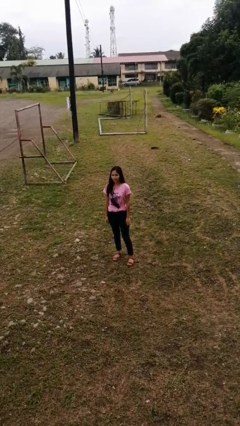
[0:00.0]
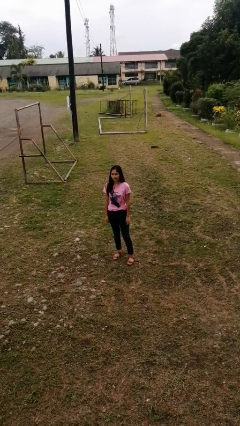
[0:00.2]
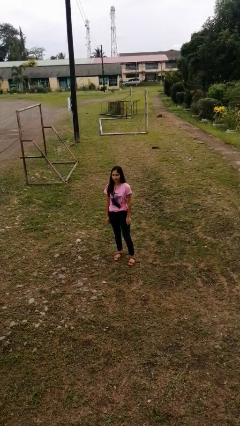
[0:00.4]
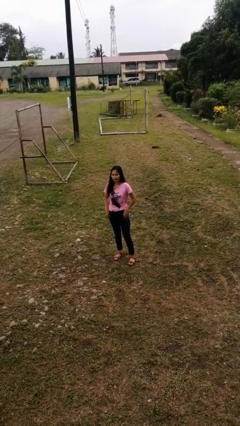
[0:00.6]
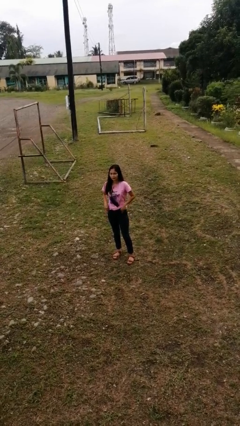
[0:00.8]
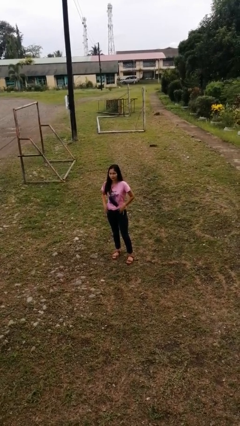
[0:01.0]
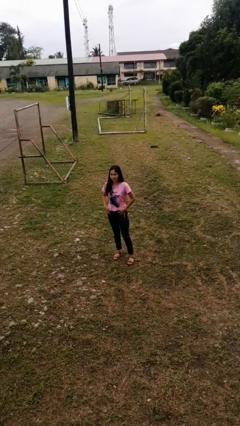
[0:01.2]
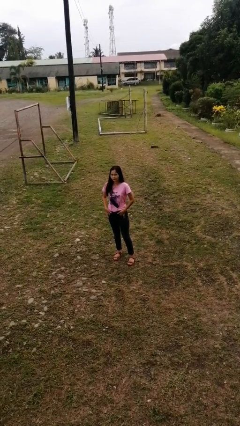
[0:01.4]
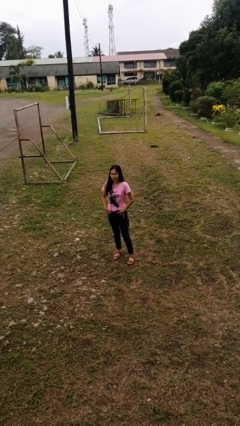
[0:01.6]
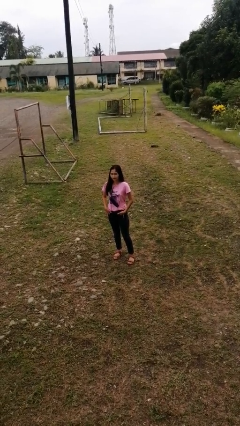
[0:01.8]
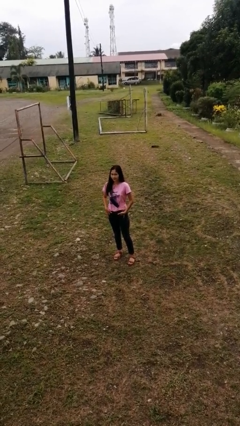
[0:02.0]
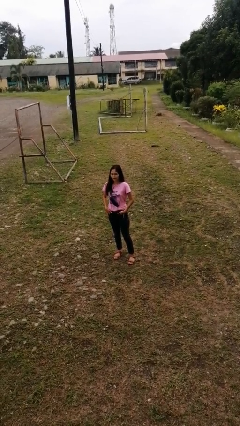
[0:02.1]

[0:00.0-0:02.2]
person puts hands in back pockets

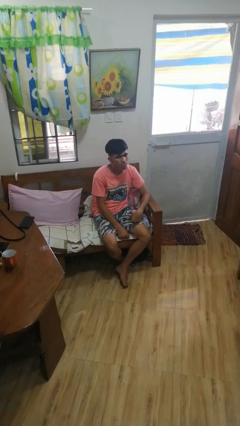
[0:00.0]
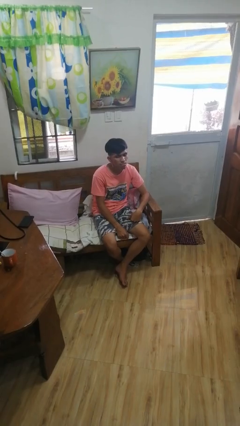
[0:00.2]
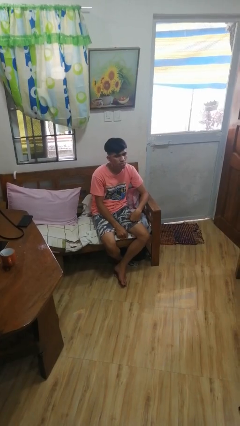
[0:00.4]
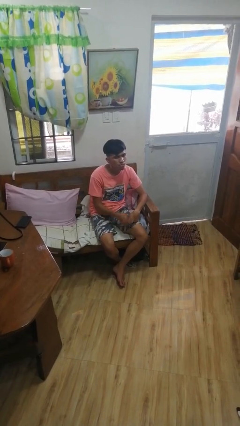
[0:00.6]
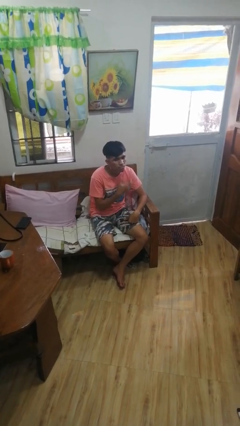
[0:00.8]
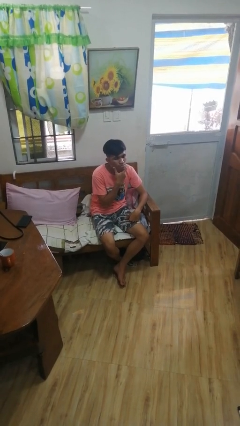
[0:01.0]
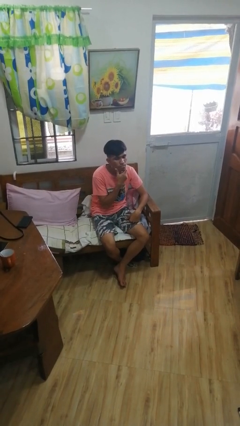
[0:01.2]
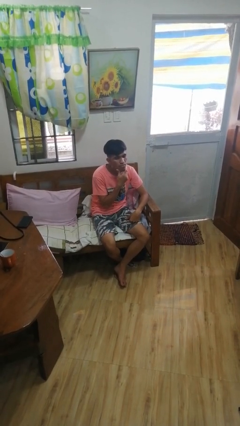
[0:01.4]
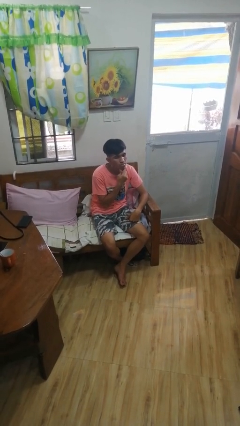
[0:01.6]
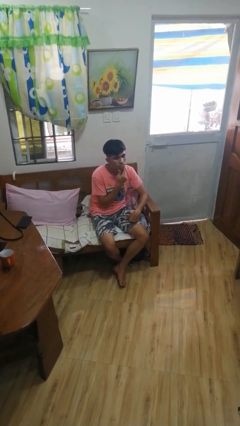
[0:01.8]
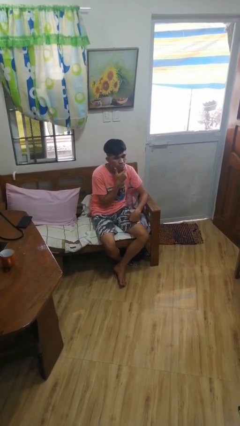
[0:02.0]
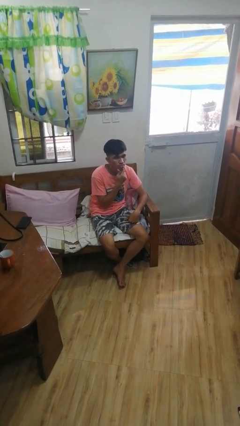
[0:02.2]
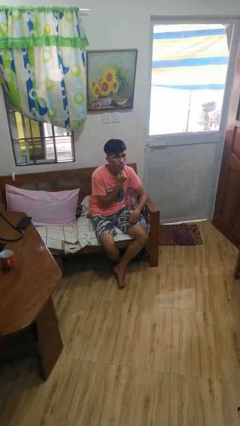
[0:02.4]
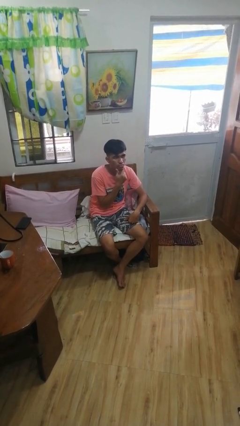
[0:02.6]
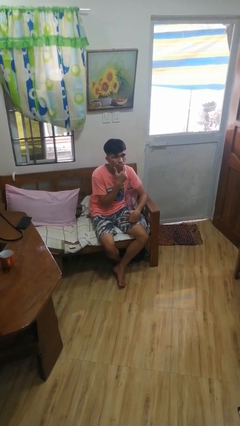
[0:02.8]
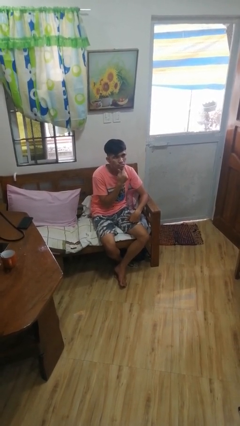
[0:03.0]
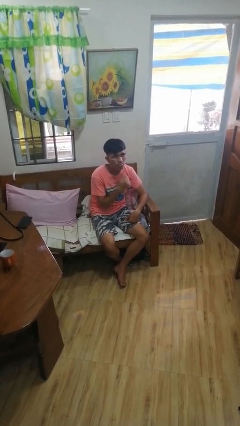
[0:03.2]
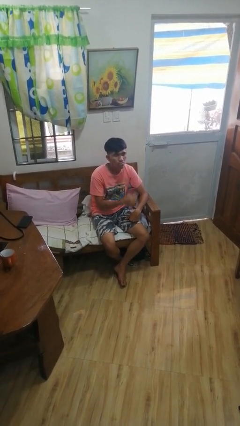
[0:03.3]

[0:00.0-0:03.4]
person strokes chin

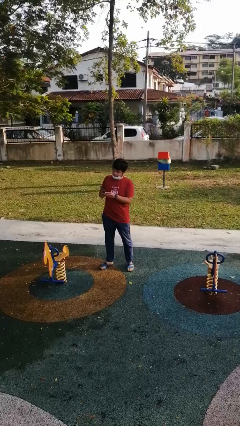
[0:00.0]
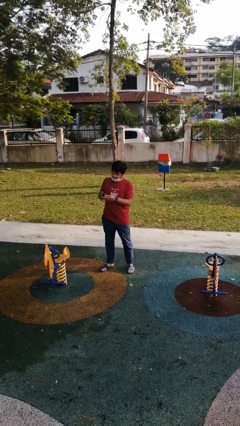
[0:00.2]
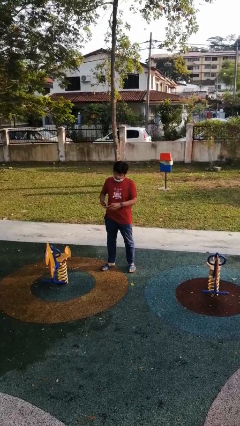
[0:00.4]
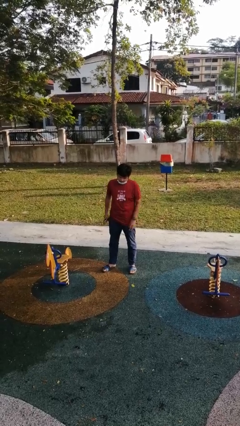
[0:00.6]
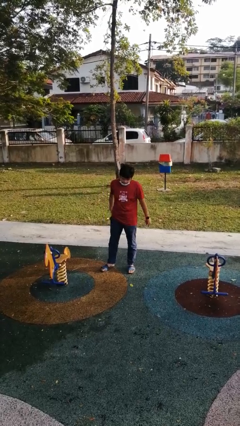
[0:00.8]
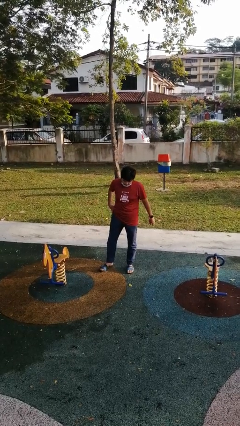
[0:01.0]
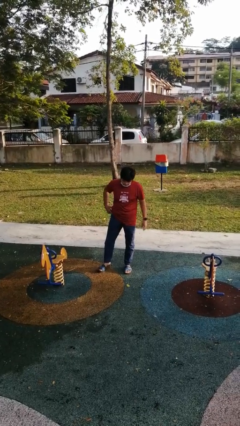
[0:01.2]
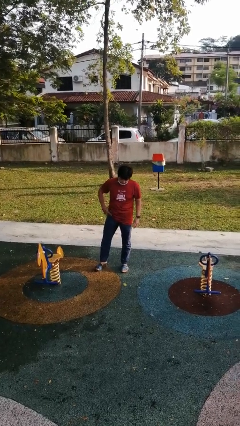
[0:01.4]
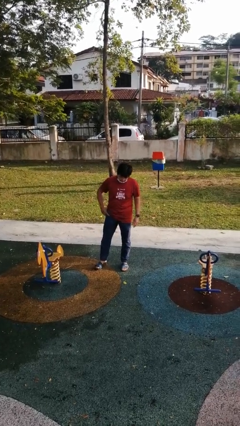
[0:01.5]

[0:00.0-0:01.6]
person puts phone into pocket

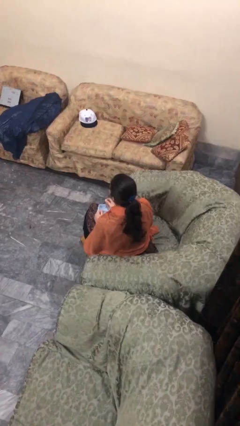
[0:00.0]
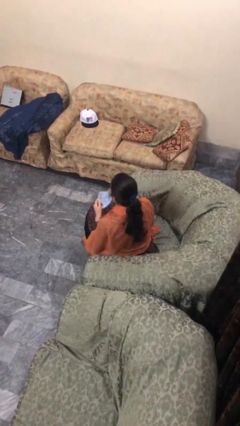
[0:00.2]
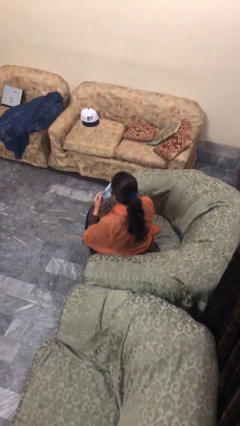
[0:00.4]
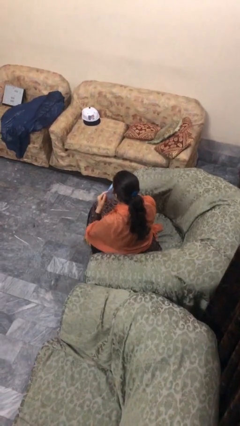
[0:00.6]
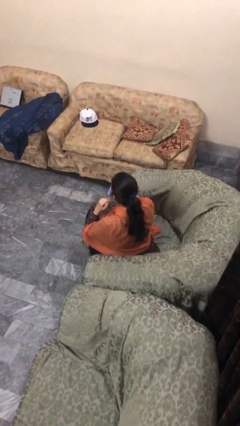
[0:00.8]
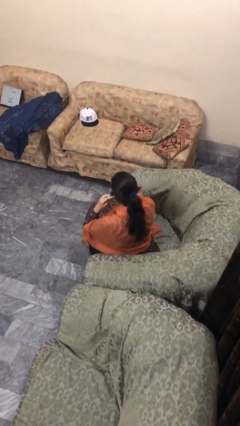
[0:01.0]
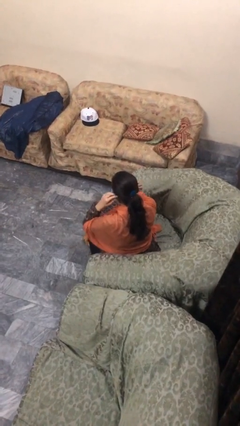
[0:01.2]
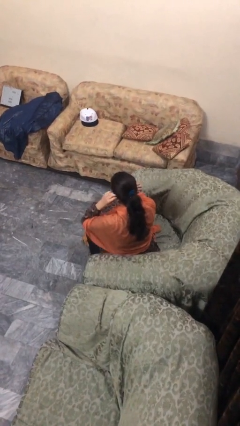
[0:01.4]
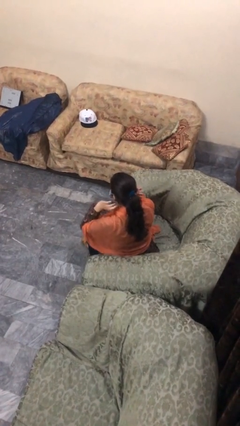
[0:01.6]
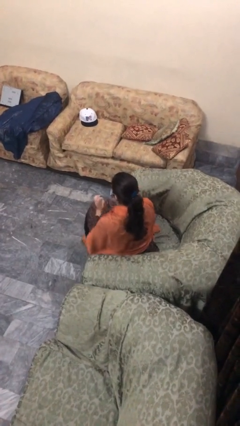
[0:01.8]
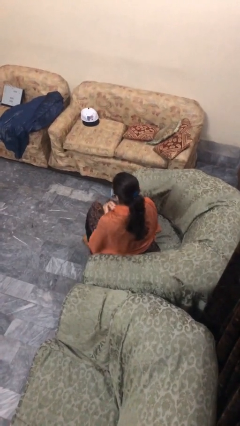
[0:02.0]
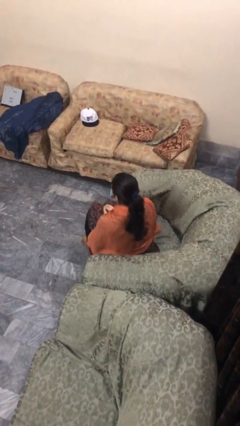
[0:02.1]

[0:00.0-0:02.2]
person puts on facemask

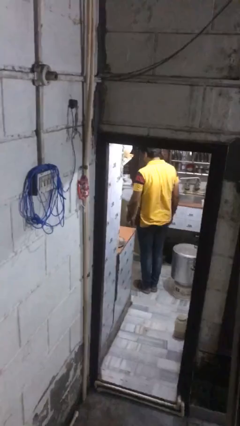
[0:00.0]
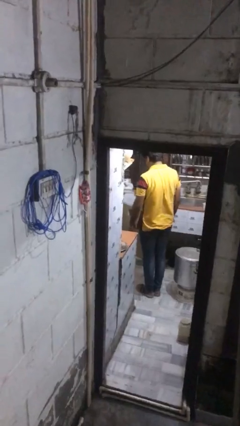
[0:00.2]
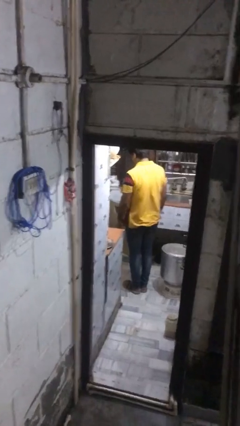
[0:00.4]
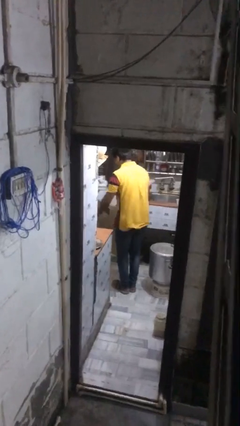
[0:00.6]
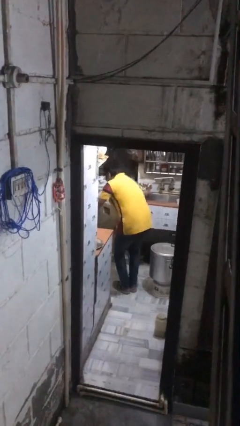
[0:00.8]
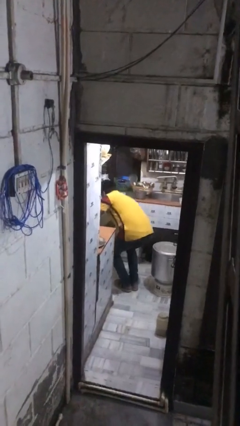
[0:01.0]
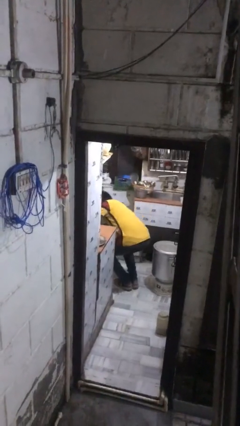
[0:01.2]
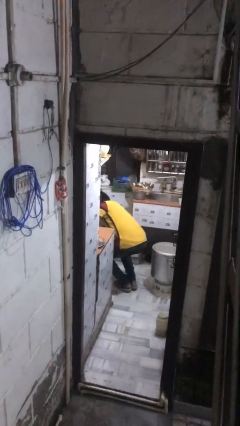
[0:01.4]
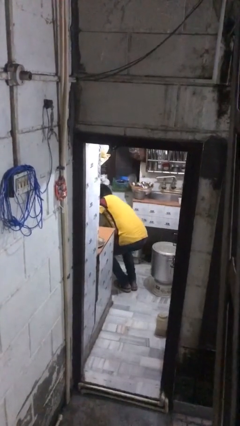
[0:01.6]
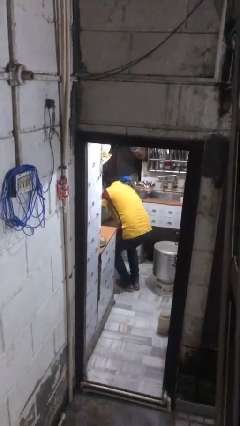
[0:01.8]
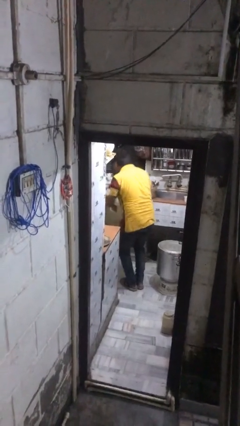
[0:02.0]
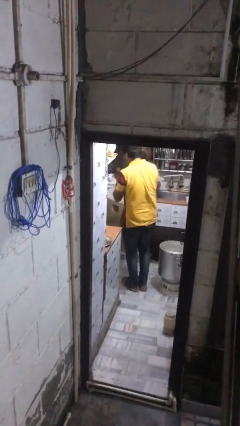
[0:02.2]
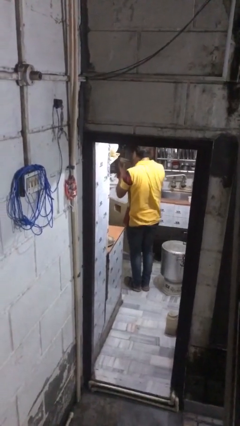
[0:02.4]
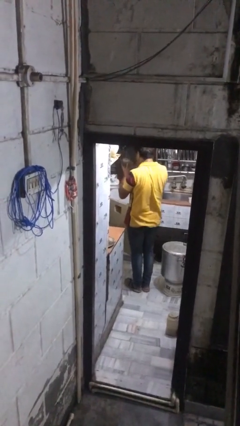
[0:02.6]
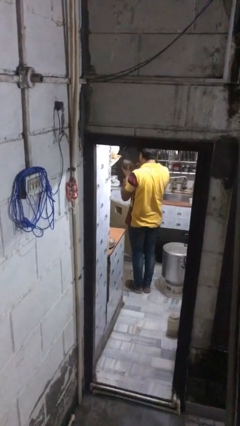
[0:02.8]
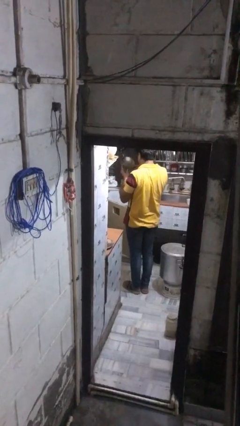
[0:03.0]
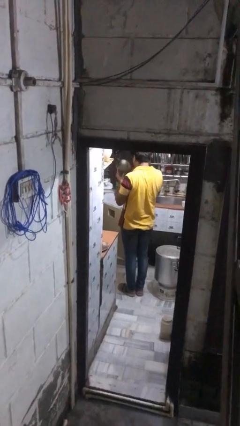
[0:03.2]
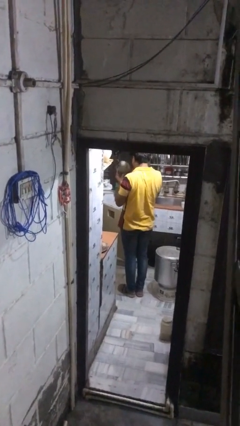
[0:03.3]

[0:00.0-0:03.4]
person takes object from kitchen drawer

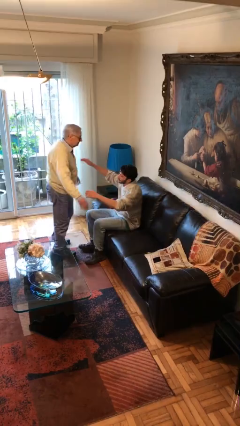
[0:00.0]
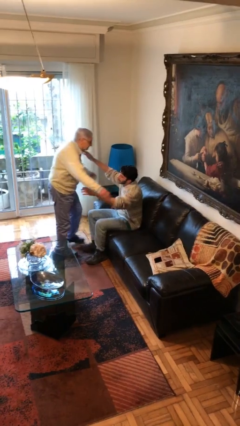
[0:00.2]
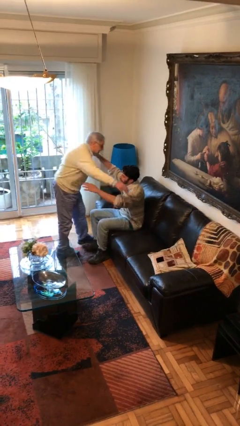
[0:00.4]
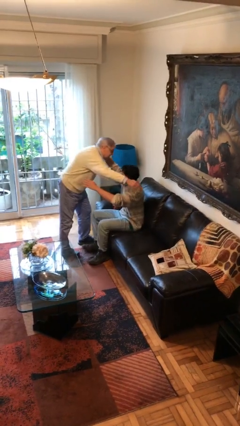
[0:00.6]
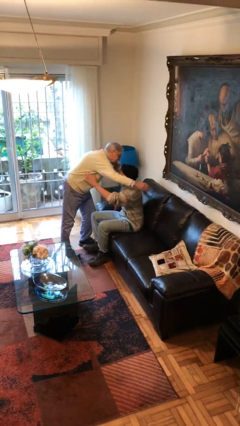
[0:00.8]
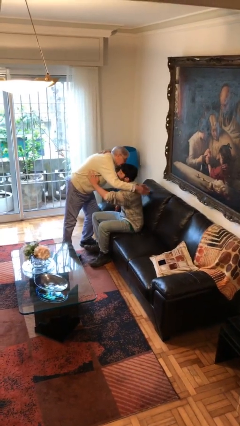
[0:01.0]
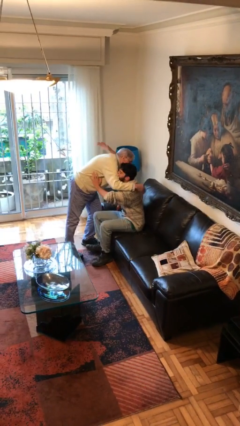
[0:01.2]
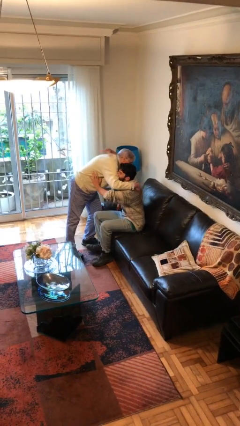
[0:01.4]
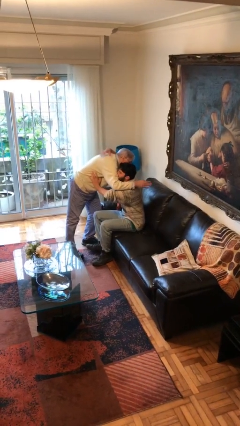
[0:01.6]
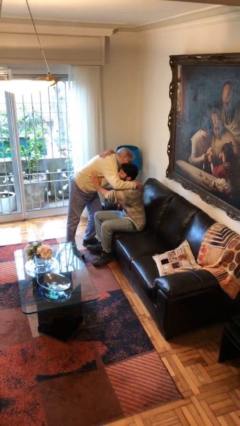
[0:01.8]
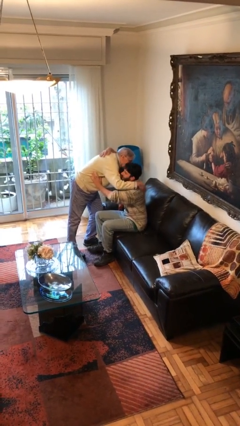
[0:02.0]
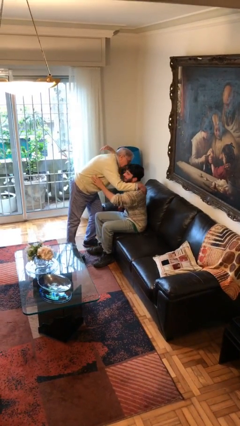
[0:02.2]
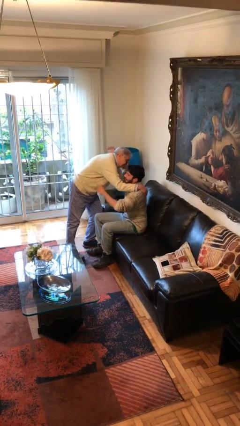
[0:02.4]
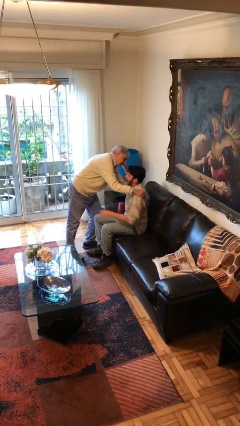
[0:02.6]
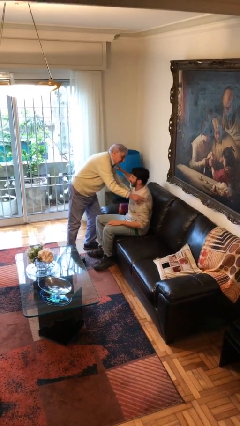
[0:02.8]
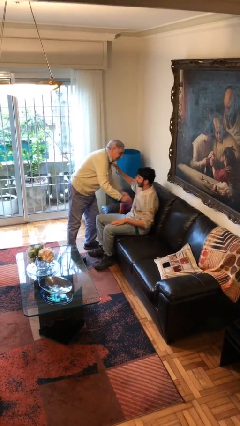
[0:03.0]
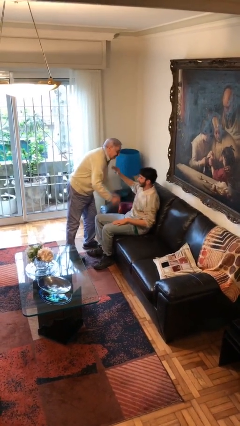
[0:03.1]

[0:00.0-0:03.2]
person embraces person

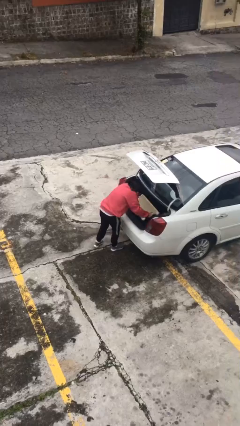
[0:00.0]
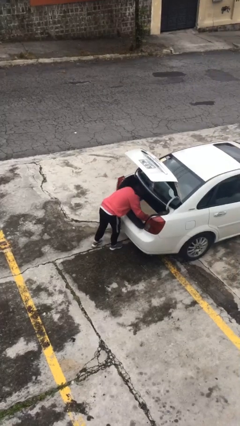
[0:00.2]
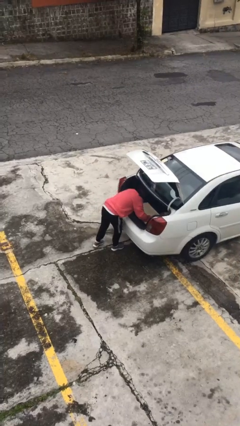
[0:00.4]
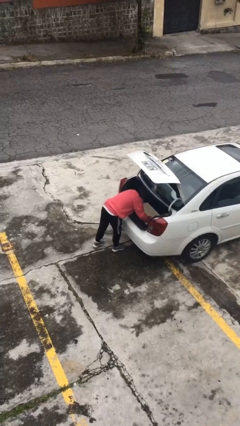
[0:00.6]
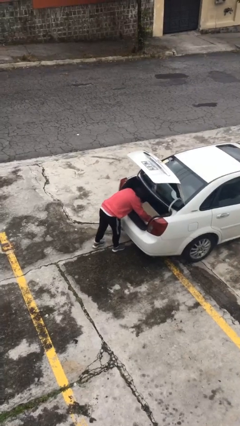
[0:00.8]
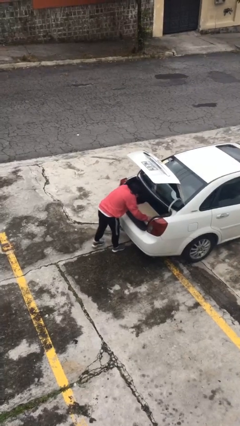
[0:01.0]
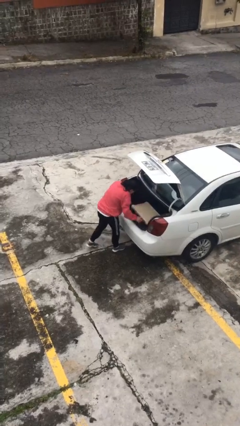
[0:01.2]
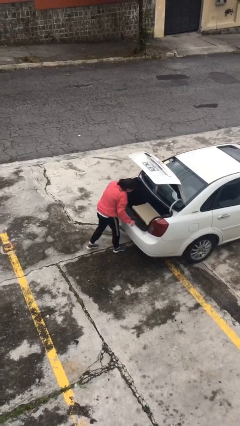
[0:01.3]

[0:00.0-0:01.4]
person loads car
